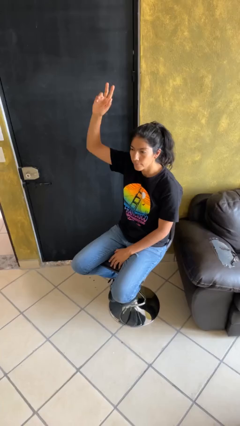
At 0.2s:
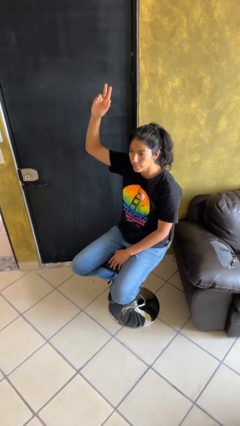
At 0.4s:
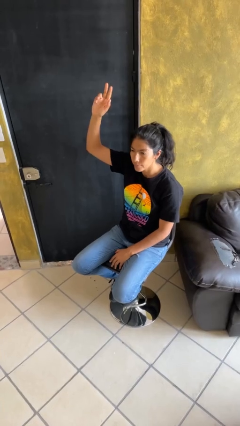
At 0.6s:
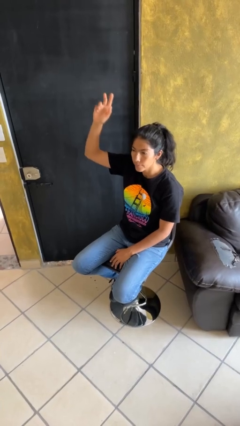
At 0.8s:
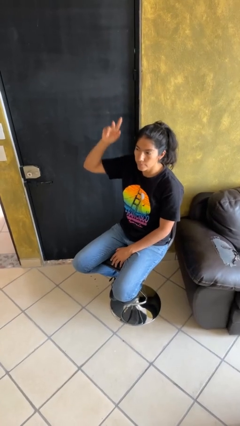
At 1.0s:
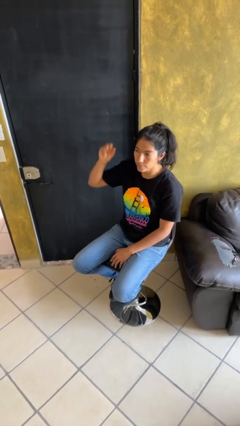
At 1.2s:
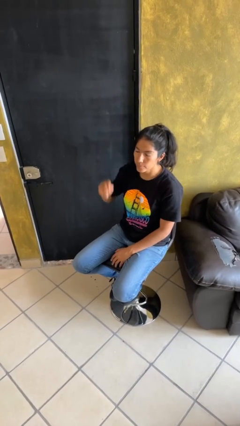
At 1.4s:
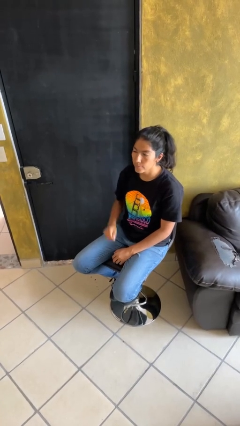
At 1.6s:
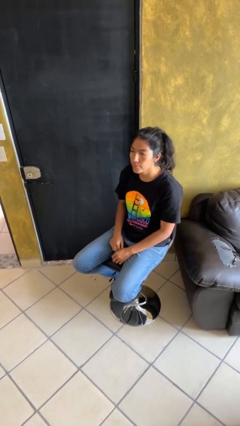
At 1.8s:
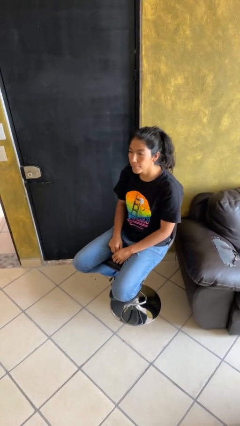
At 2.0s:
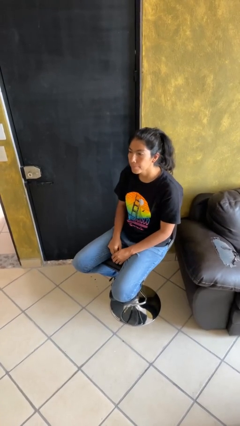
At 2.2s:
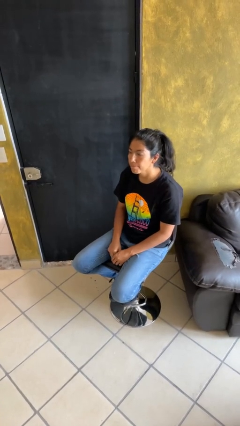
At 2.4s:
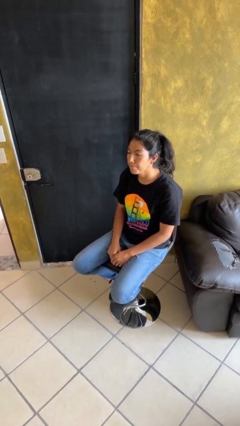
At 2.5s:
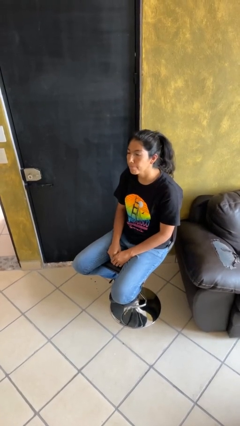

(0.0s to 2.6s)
person gestures lower hand

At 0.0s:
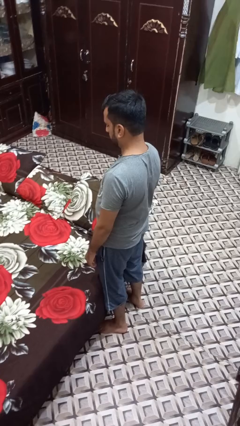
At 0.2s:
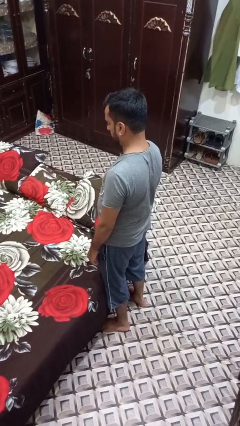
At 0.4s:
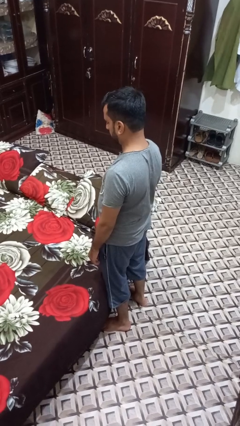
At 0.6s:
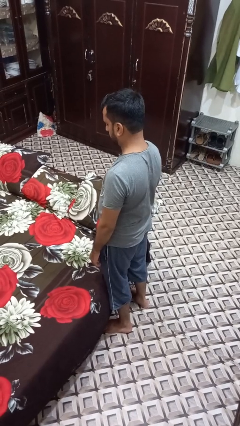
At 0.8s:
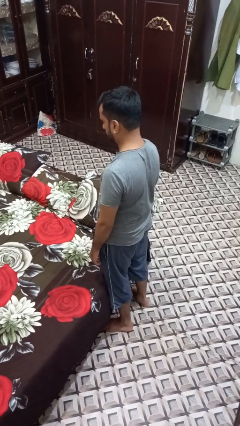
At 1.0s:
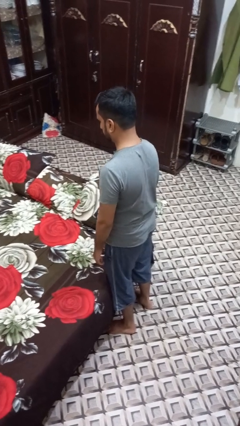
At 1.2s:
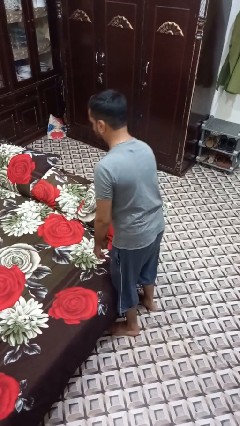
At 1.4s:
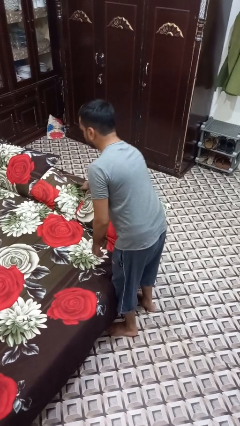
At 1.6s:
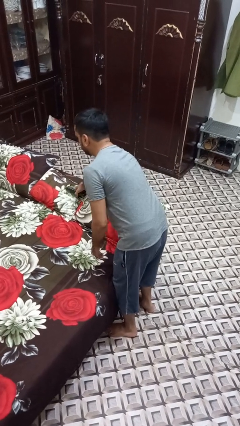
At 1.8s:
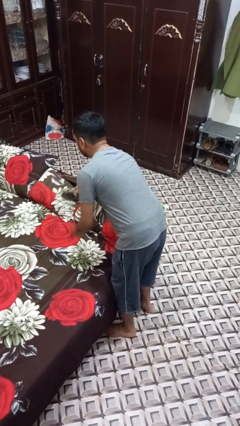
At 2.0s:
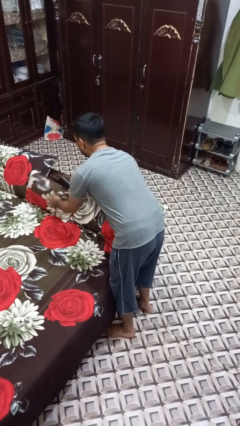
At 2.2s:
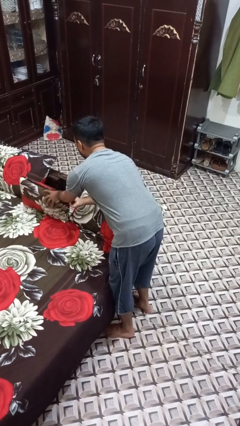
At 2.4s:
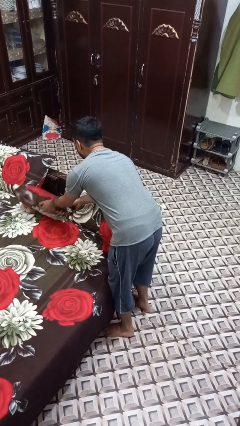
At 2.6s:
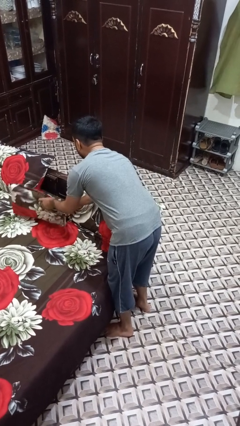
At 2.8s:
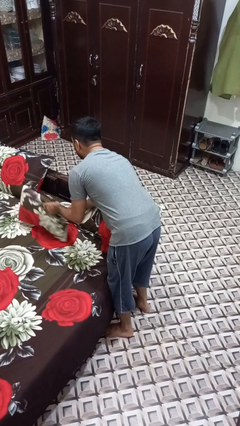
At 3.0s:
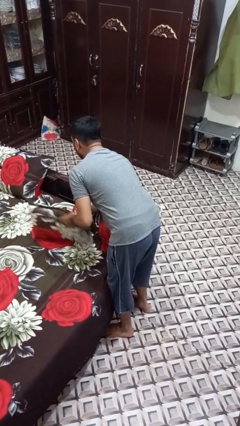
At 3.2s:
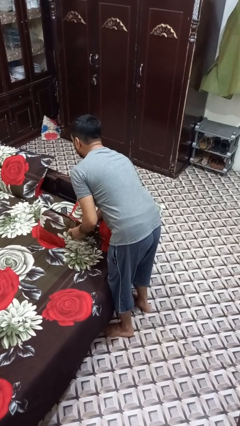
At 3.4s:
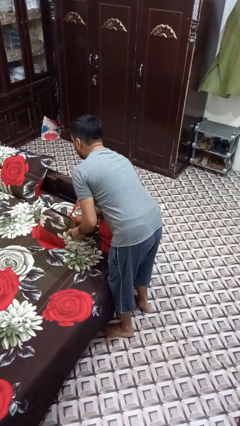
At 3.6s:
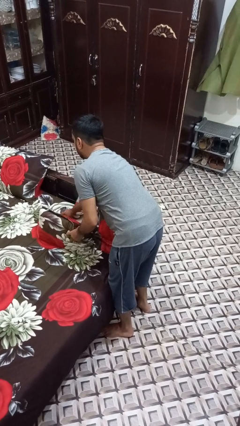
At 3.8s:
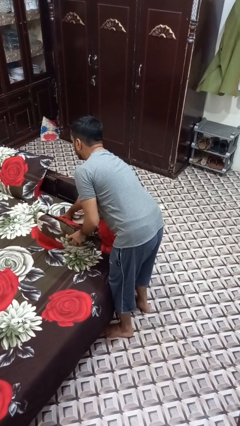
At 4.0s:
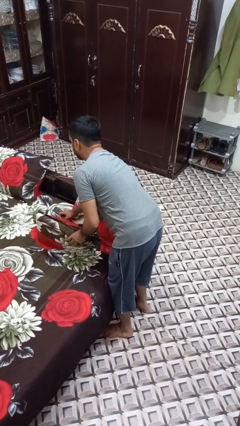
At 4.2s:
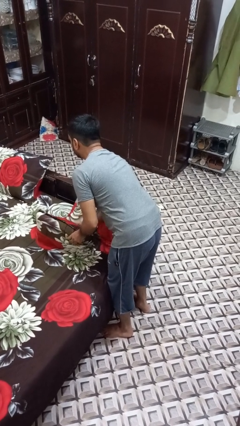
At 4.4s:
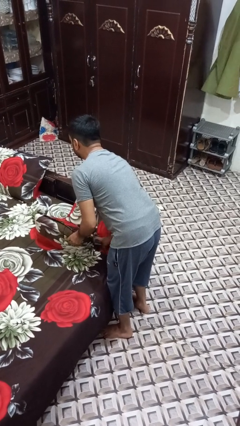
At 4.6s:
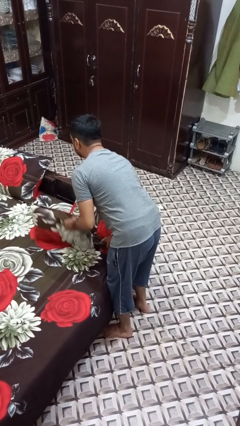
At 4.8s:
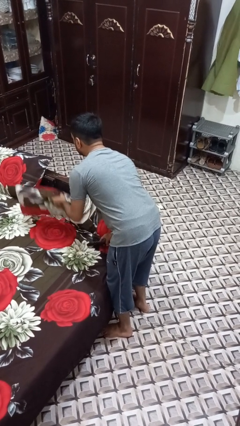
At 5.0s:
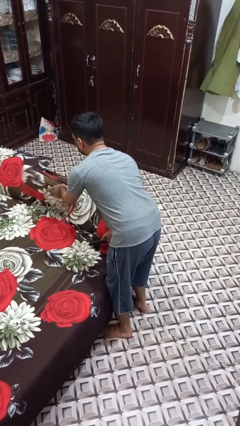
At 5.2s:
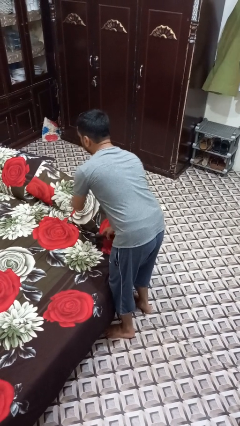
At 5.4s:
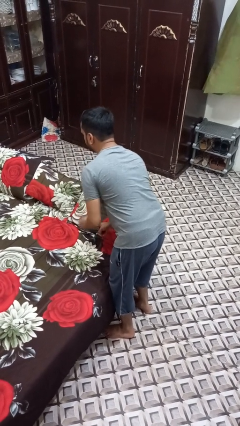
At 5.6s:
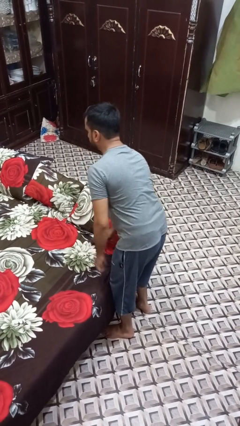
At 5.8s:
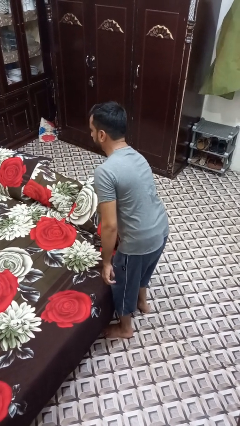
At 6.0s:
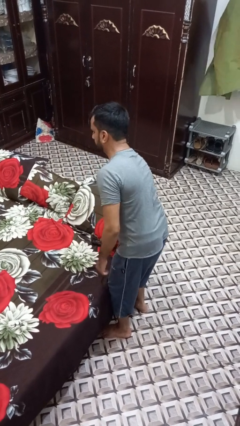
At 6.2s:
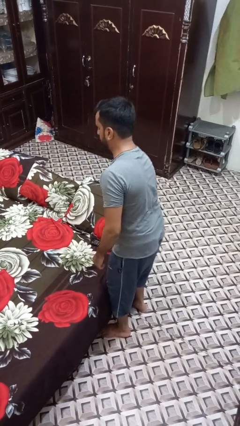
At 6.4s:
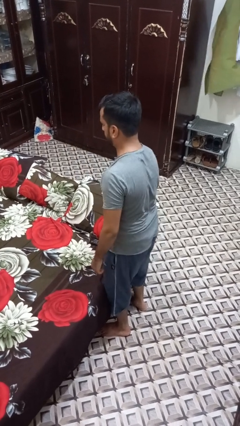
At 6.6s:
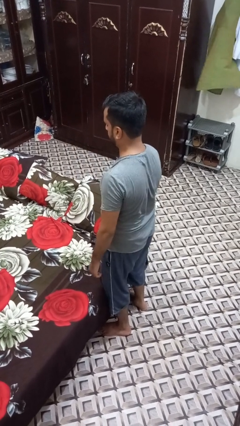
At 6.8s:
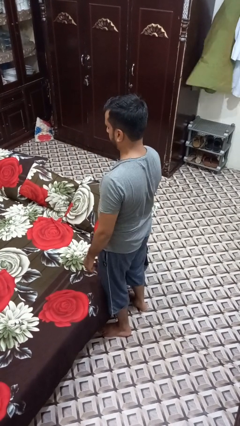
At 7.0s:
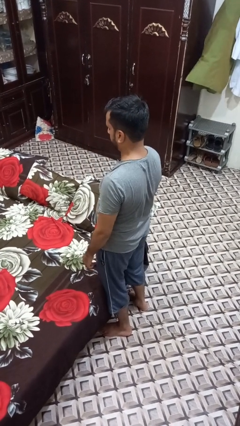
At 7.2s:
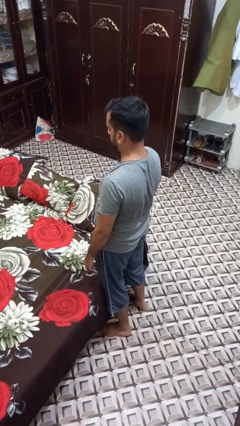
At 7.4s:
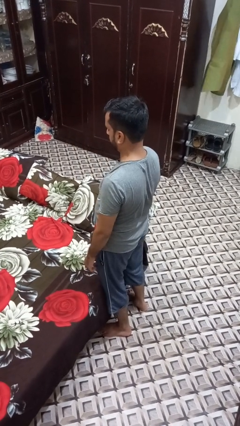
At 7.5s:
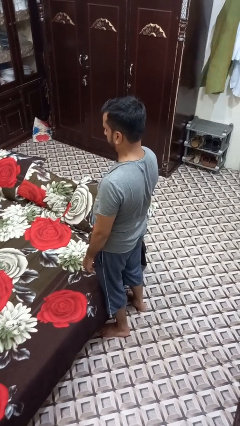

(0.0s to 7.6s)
person searches in couch

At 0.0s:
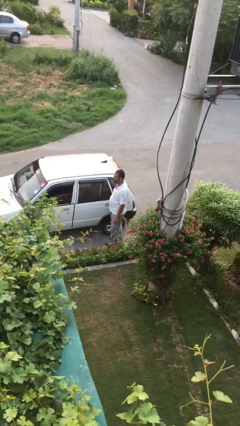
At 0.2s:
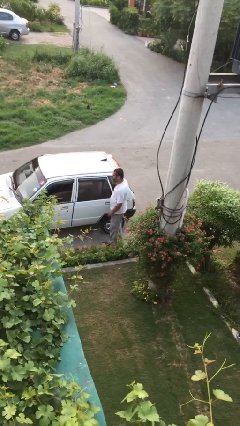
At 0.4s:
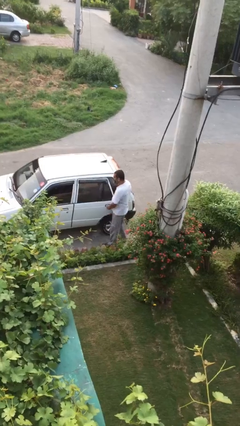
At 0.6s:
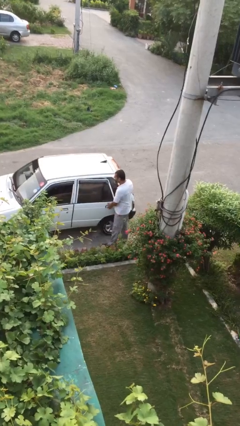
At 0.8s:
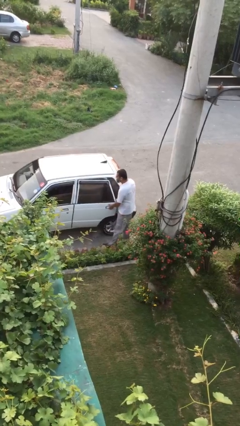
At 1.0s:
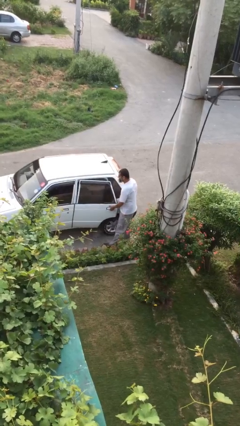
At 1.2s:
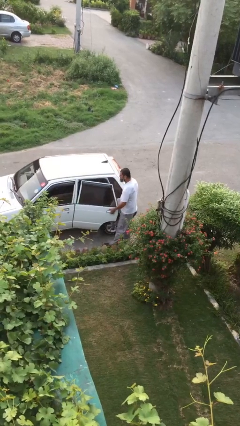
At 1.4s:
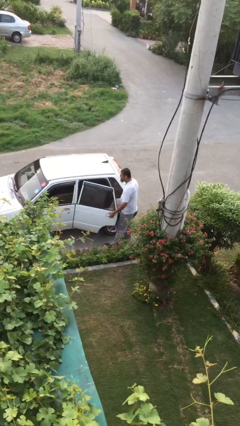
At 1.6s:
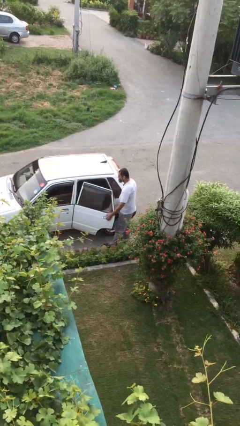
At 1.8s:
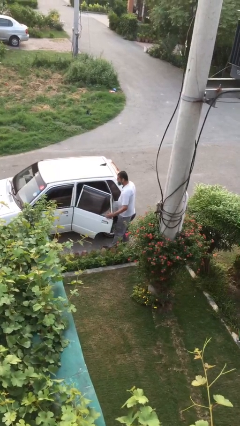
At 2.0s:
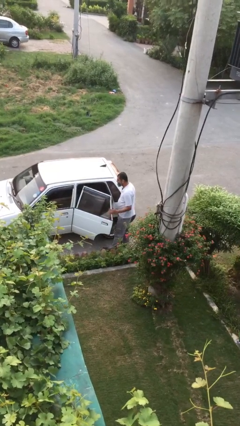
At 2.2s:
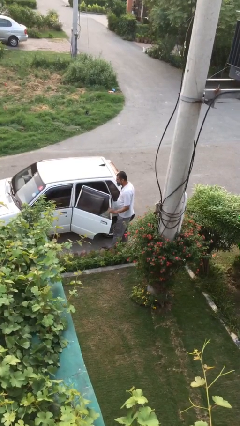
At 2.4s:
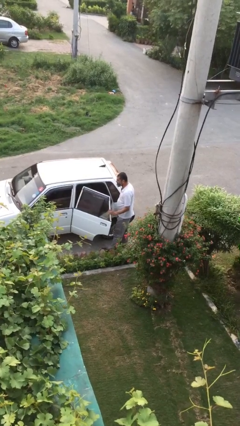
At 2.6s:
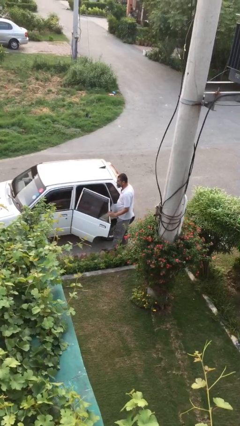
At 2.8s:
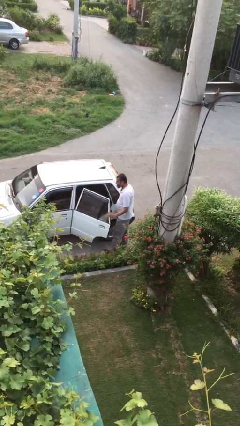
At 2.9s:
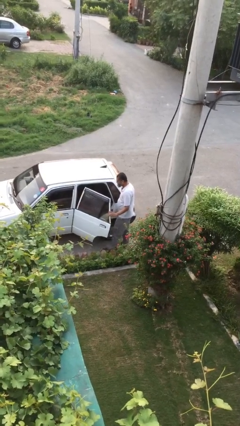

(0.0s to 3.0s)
person opens car door

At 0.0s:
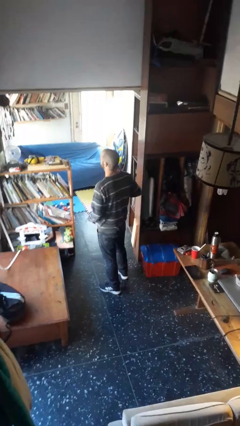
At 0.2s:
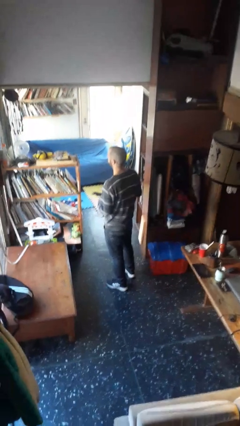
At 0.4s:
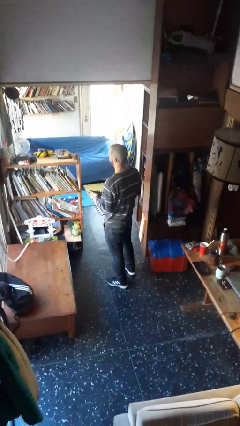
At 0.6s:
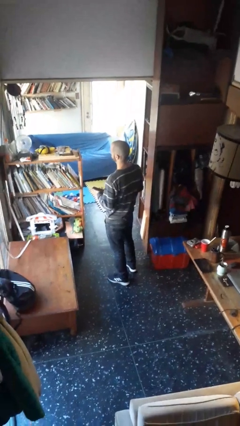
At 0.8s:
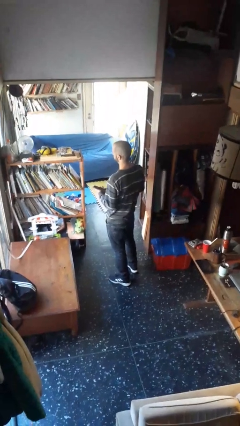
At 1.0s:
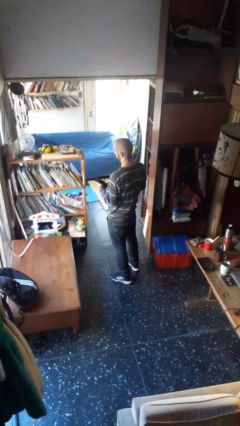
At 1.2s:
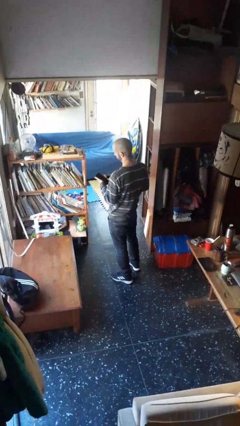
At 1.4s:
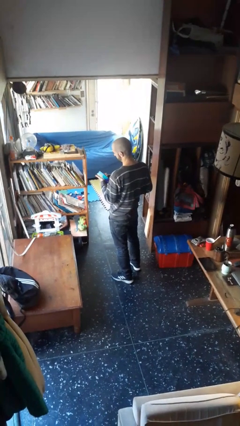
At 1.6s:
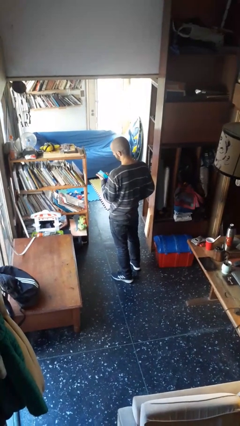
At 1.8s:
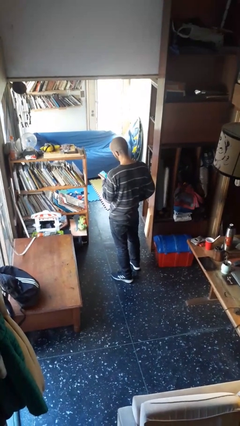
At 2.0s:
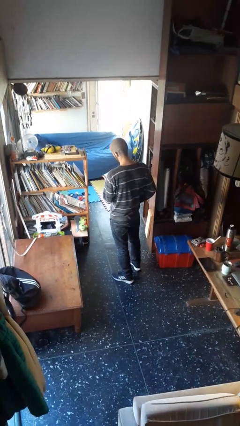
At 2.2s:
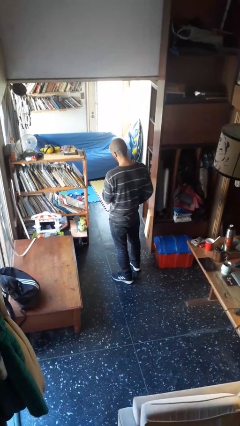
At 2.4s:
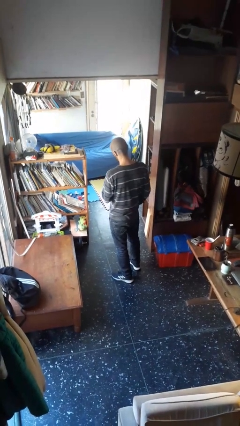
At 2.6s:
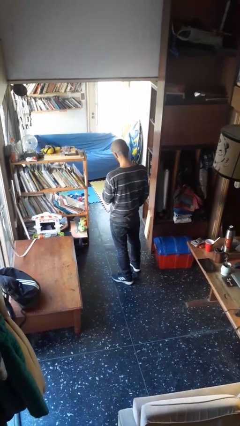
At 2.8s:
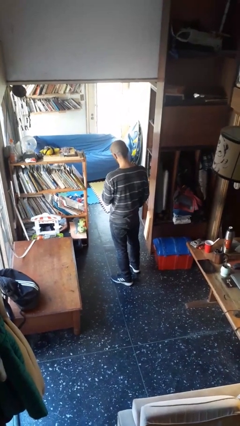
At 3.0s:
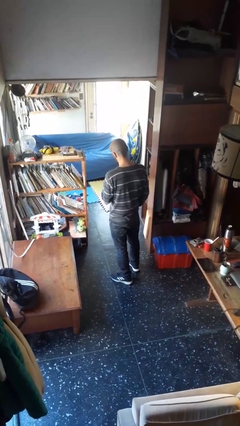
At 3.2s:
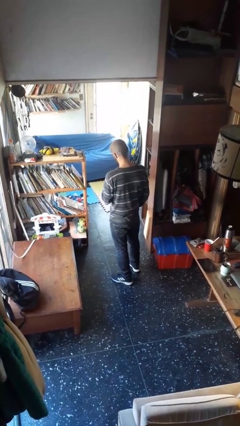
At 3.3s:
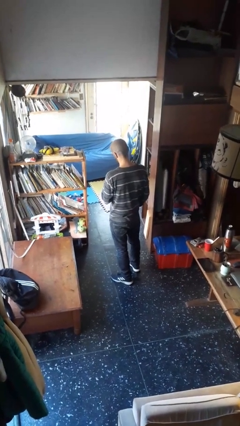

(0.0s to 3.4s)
person takes phone from pocket

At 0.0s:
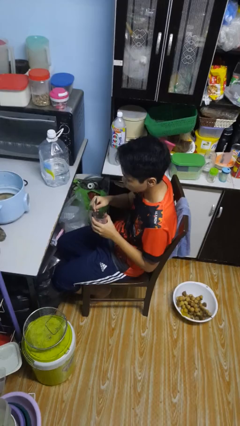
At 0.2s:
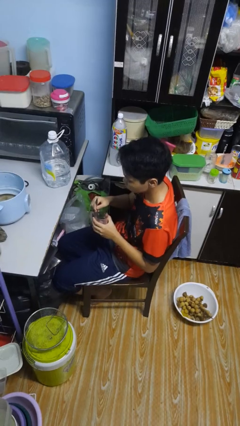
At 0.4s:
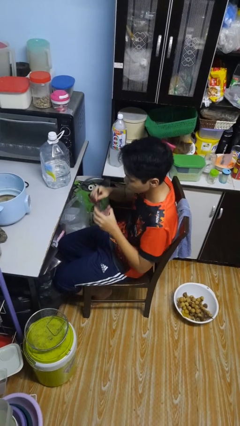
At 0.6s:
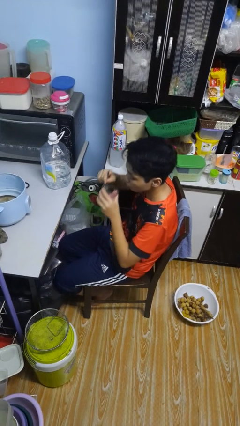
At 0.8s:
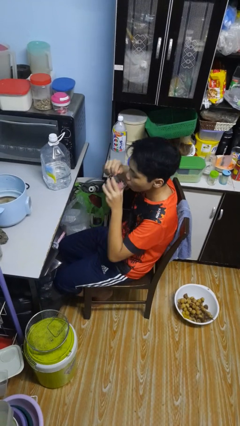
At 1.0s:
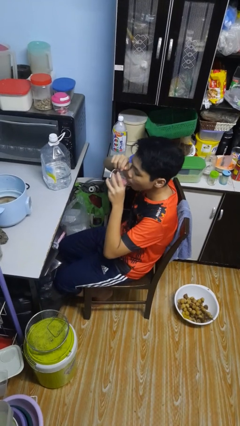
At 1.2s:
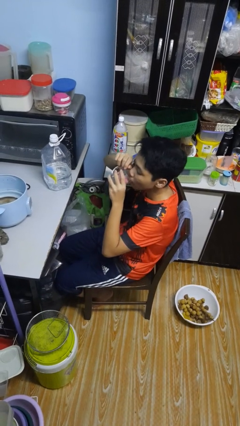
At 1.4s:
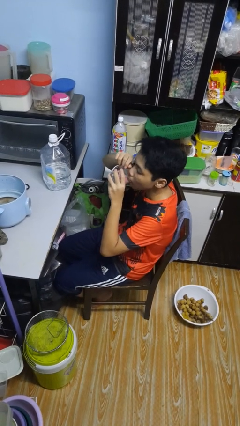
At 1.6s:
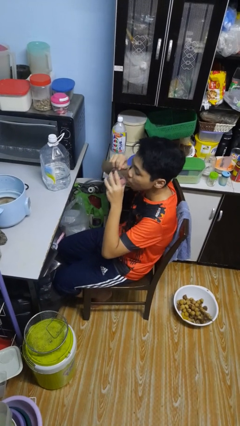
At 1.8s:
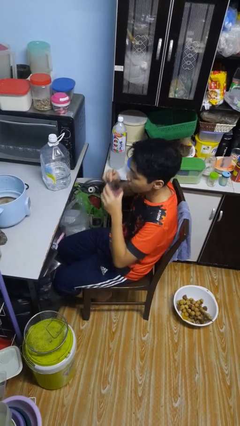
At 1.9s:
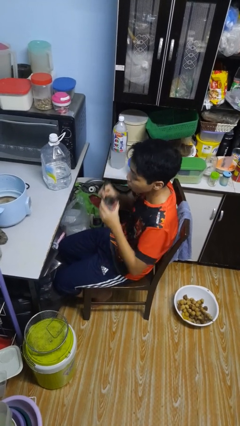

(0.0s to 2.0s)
person drinks from mug
